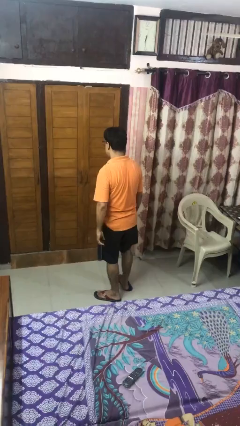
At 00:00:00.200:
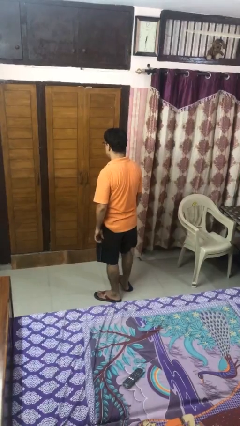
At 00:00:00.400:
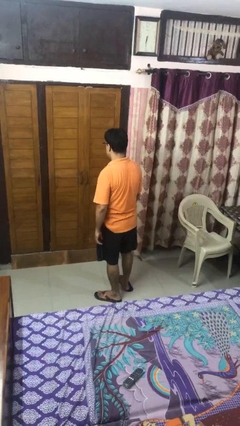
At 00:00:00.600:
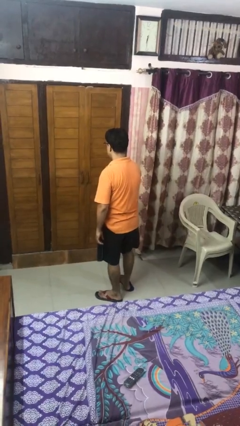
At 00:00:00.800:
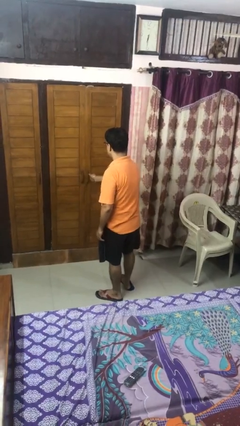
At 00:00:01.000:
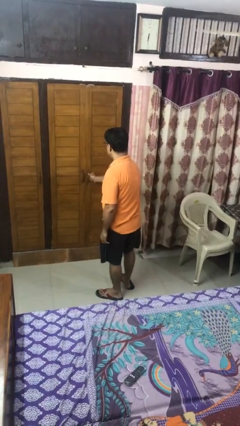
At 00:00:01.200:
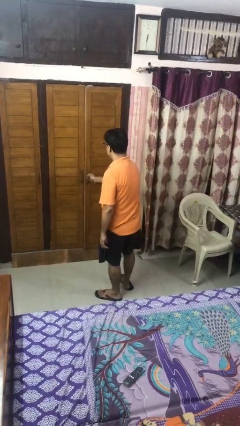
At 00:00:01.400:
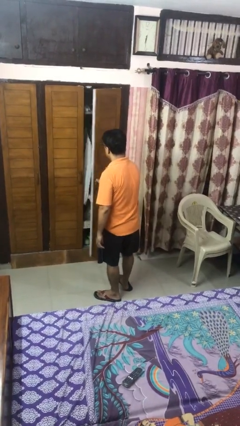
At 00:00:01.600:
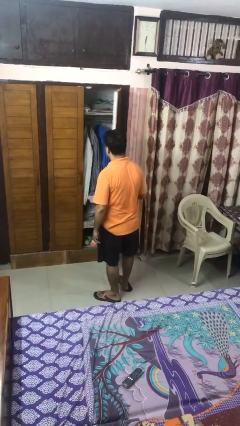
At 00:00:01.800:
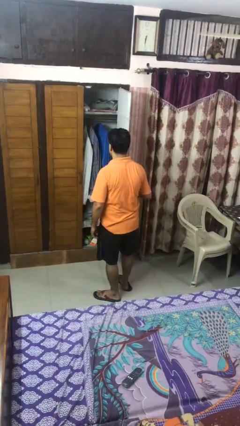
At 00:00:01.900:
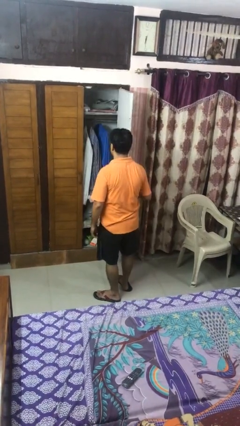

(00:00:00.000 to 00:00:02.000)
person opens closet door

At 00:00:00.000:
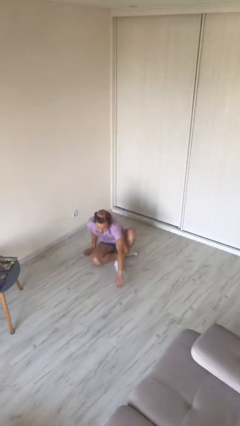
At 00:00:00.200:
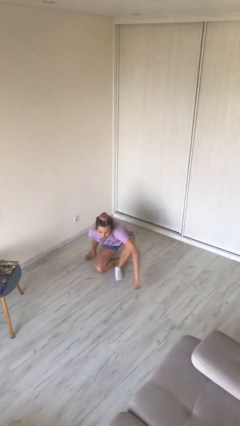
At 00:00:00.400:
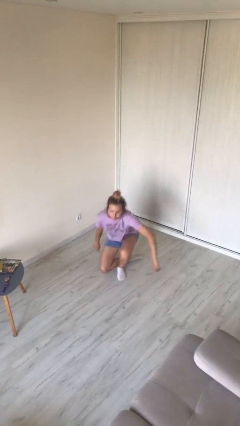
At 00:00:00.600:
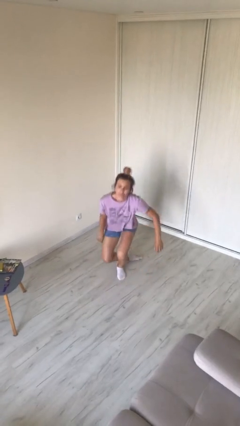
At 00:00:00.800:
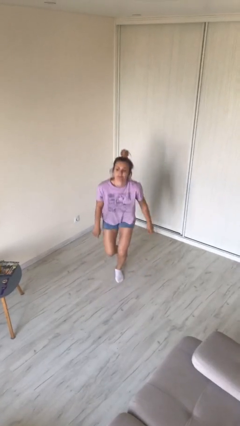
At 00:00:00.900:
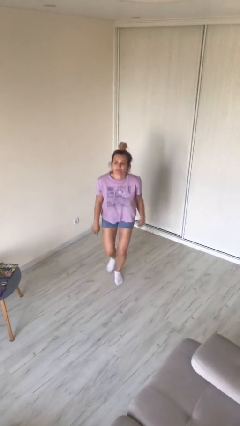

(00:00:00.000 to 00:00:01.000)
person stands up from floor

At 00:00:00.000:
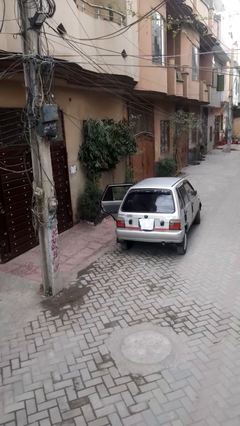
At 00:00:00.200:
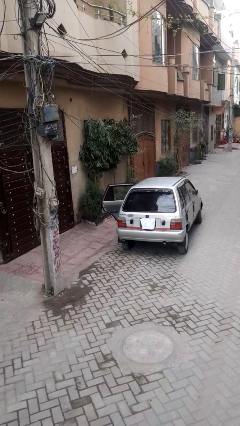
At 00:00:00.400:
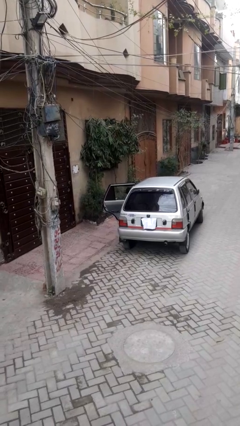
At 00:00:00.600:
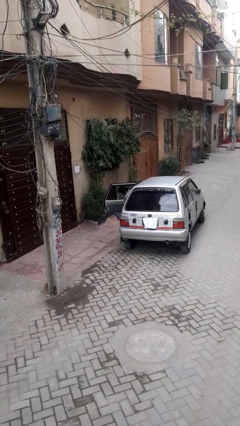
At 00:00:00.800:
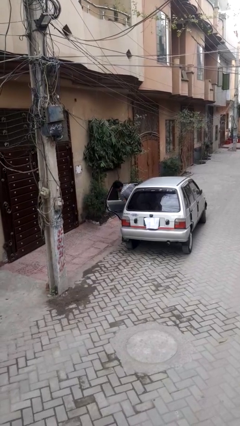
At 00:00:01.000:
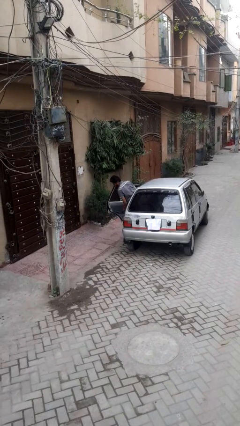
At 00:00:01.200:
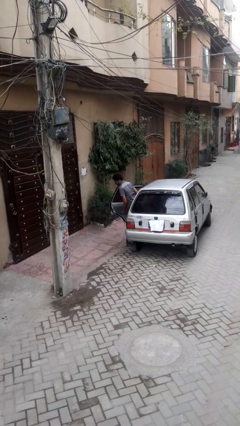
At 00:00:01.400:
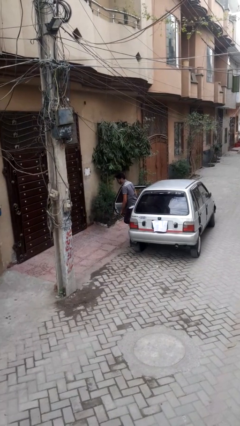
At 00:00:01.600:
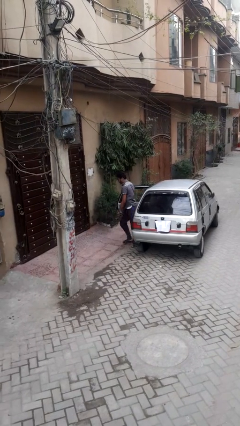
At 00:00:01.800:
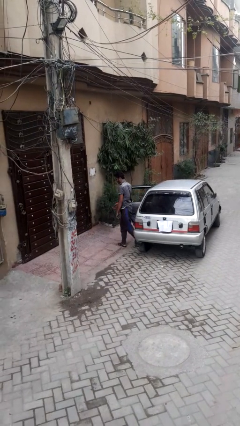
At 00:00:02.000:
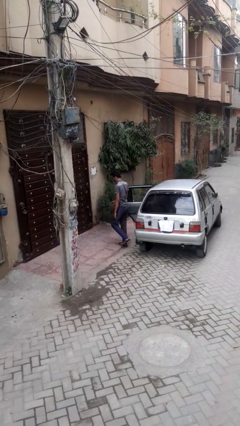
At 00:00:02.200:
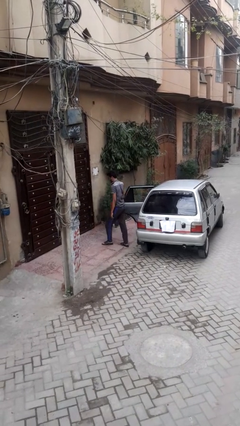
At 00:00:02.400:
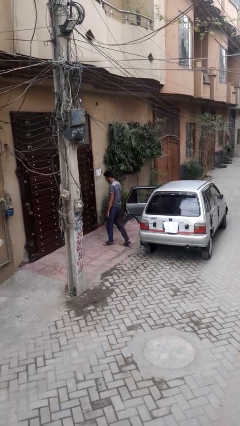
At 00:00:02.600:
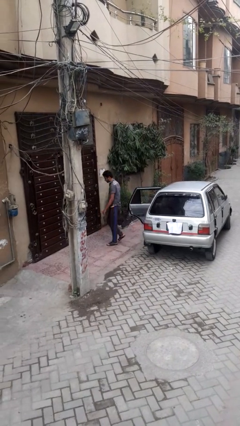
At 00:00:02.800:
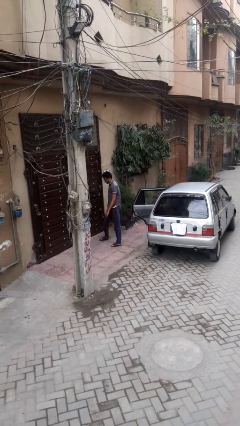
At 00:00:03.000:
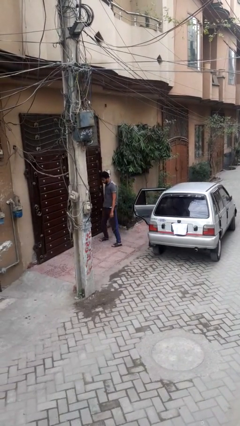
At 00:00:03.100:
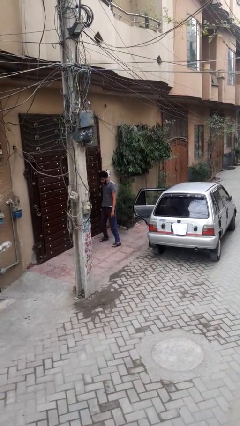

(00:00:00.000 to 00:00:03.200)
person exits car

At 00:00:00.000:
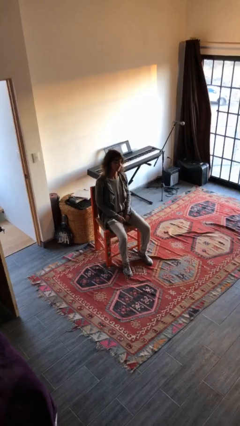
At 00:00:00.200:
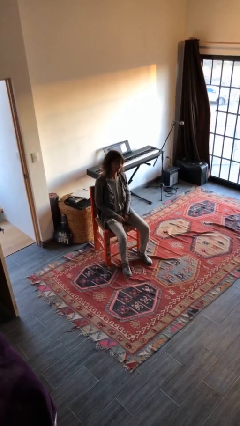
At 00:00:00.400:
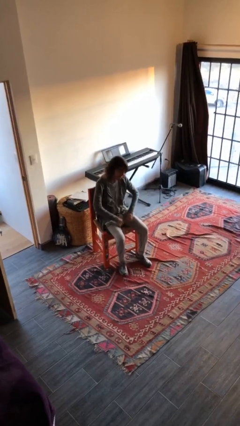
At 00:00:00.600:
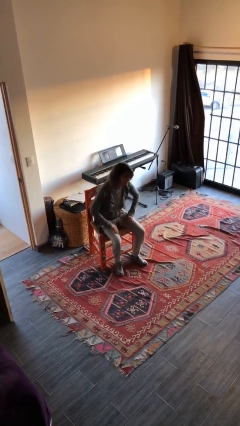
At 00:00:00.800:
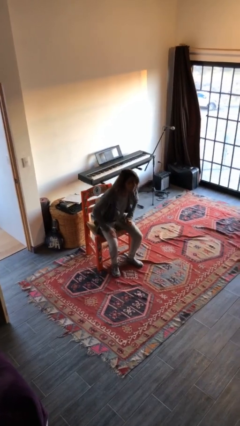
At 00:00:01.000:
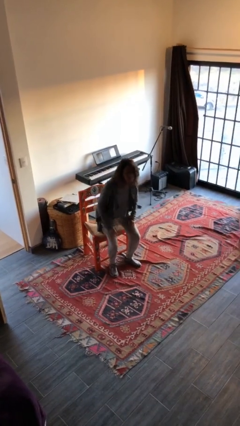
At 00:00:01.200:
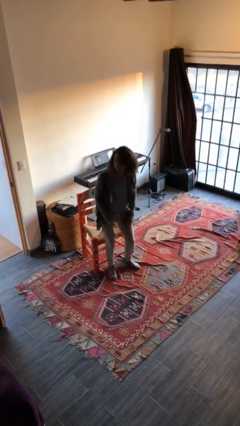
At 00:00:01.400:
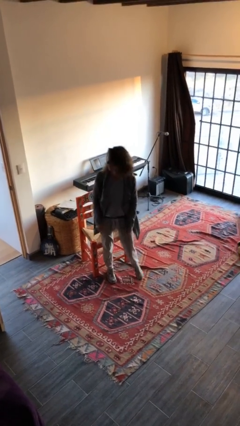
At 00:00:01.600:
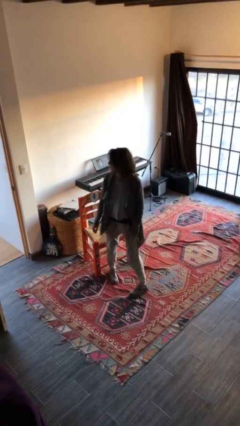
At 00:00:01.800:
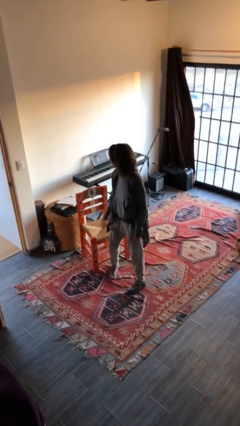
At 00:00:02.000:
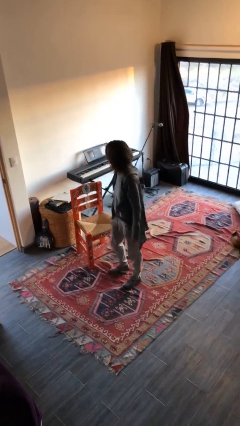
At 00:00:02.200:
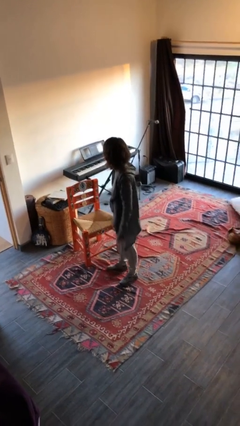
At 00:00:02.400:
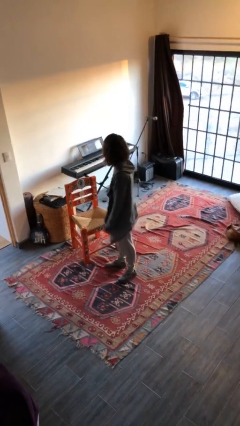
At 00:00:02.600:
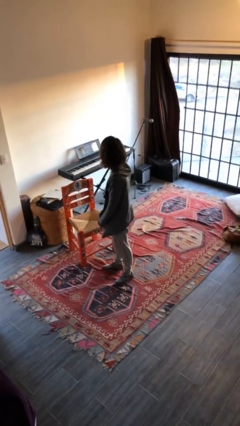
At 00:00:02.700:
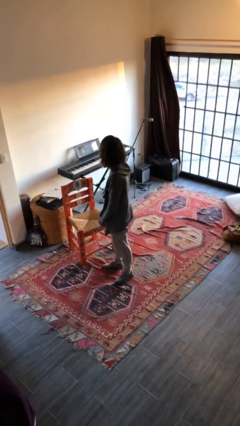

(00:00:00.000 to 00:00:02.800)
person stands up

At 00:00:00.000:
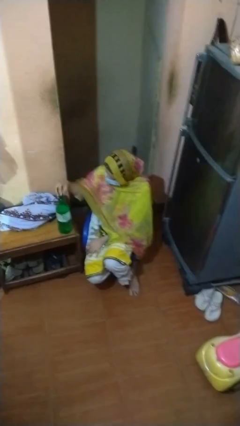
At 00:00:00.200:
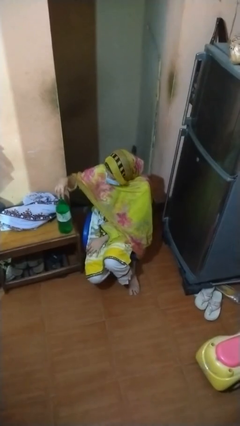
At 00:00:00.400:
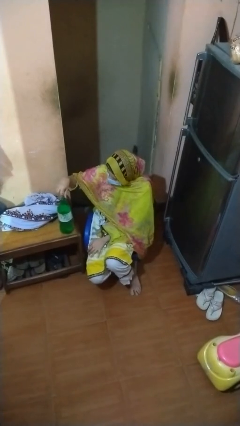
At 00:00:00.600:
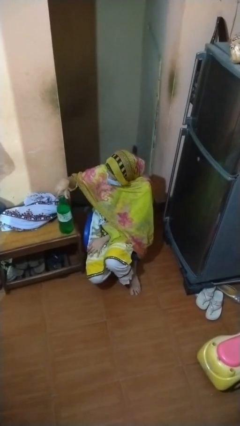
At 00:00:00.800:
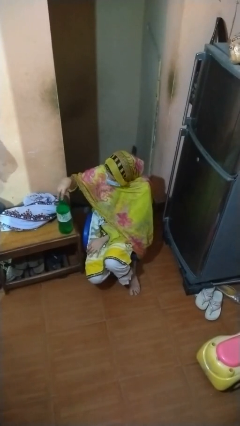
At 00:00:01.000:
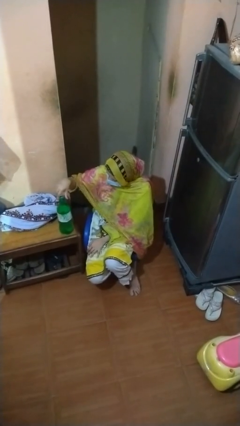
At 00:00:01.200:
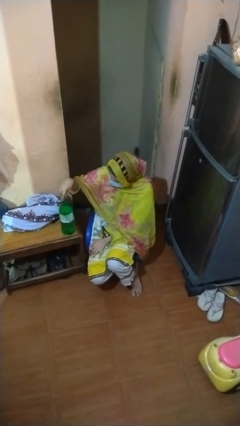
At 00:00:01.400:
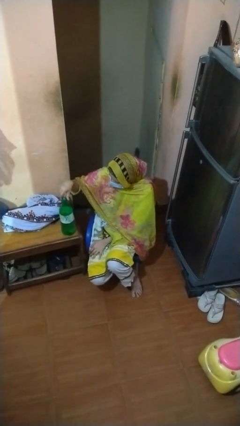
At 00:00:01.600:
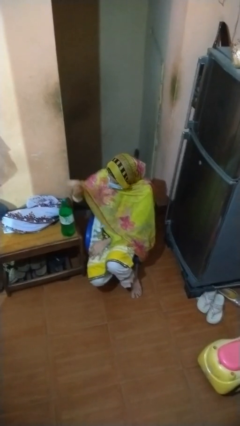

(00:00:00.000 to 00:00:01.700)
person screws lid to bottle

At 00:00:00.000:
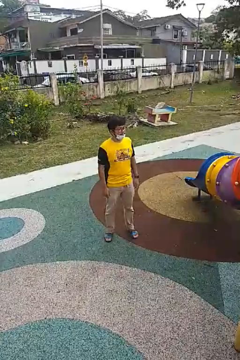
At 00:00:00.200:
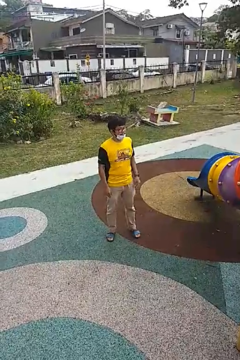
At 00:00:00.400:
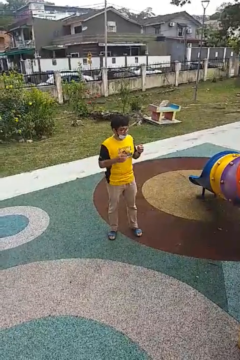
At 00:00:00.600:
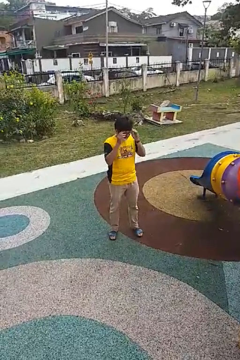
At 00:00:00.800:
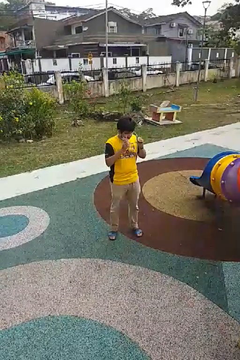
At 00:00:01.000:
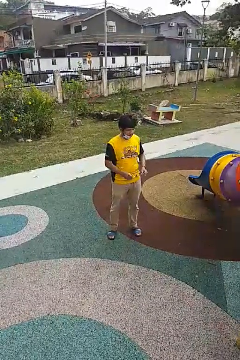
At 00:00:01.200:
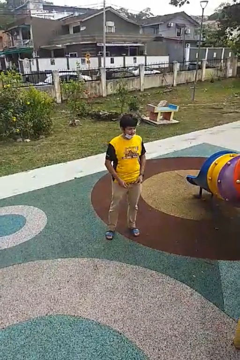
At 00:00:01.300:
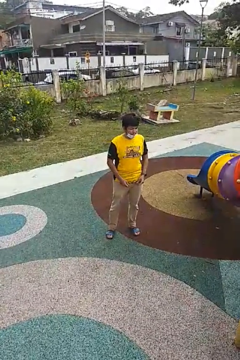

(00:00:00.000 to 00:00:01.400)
person takes off glasses

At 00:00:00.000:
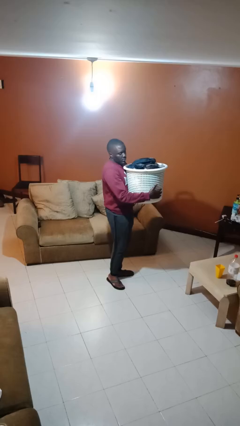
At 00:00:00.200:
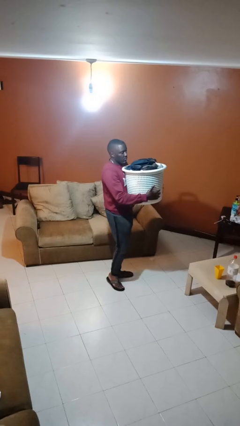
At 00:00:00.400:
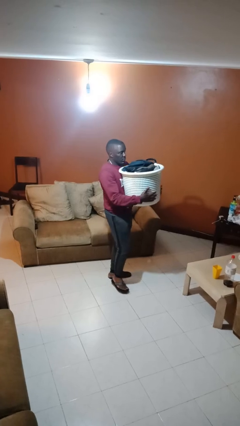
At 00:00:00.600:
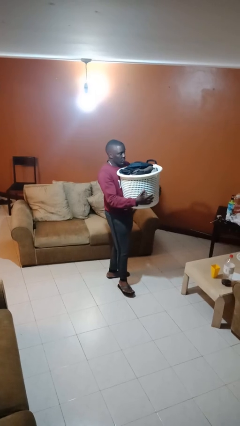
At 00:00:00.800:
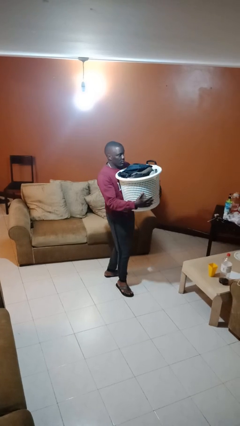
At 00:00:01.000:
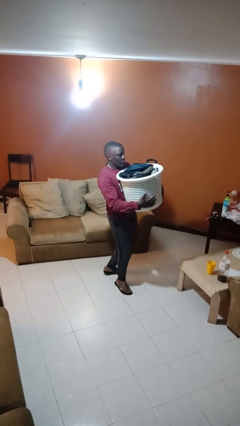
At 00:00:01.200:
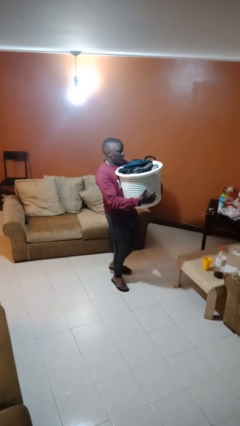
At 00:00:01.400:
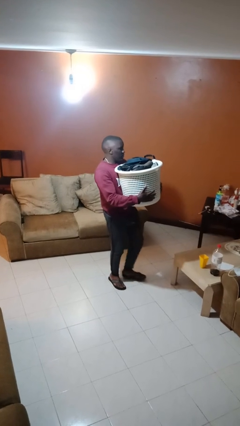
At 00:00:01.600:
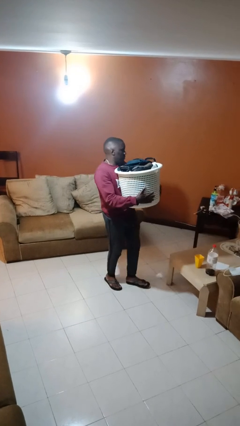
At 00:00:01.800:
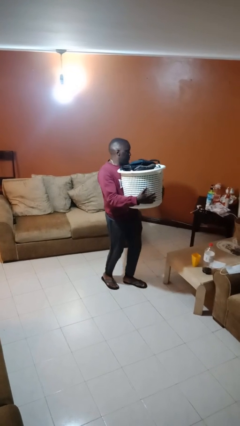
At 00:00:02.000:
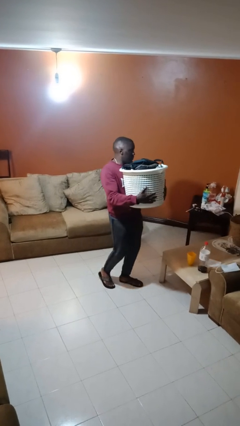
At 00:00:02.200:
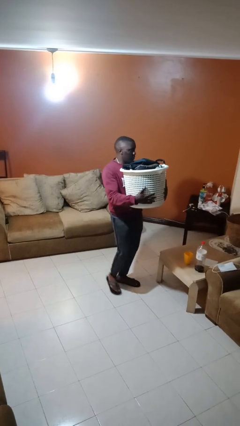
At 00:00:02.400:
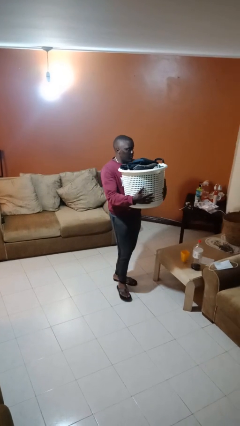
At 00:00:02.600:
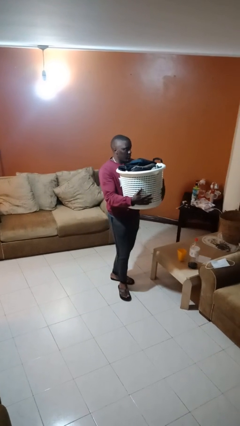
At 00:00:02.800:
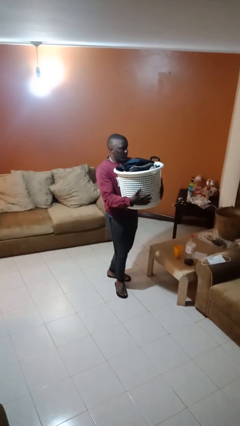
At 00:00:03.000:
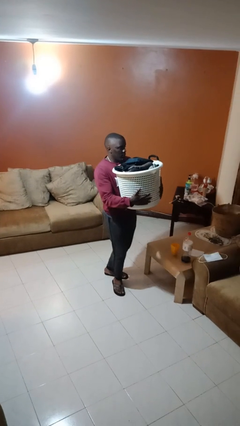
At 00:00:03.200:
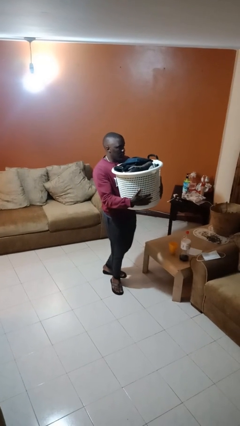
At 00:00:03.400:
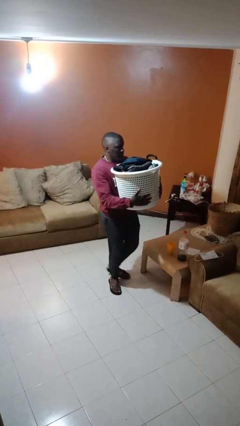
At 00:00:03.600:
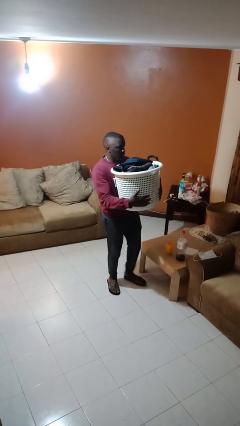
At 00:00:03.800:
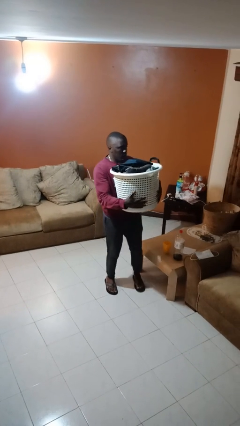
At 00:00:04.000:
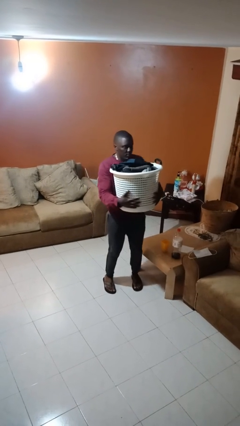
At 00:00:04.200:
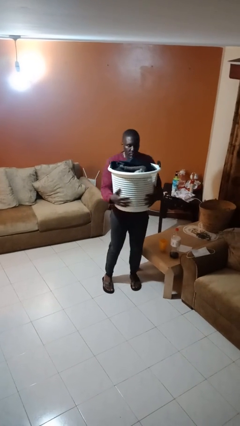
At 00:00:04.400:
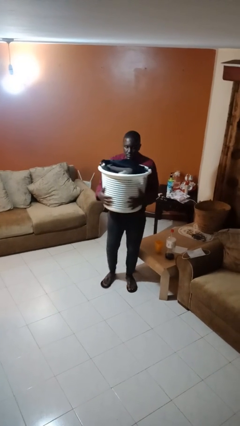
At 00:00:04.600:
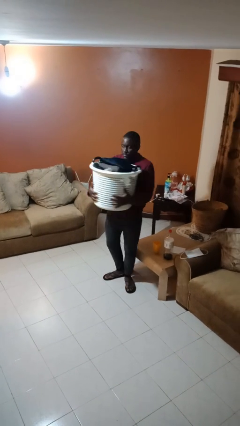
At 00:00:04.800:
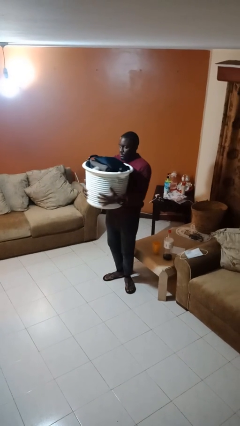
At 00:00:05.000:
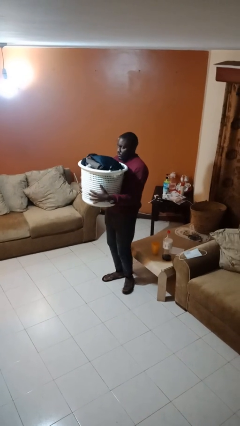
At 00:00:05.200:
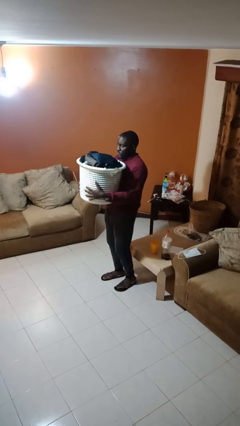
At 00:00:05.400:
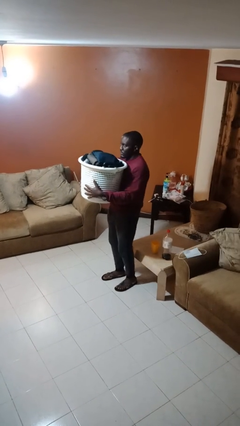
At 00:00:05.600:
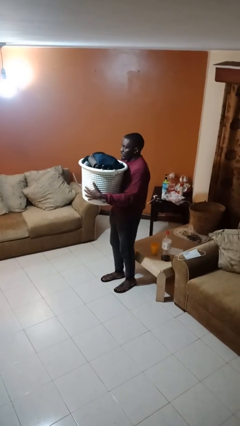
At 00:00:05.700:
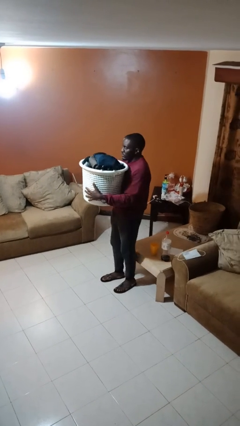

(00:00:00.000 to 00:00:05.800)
person carries laundry basket
